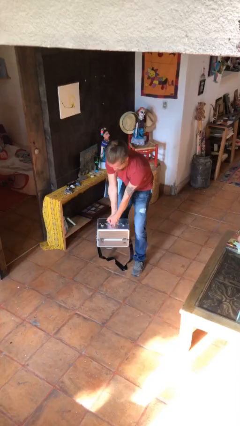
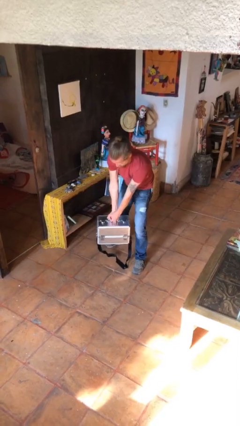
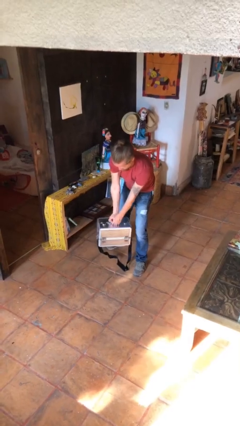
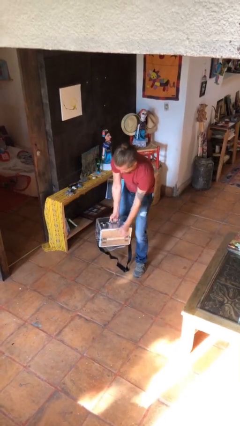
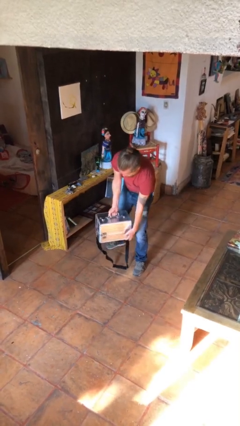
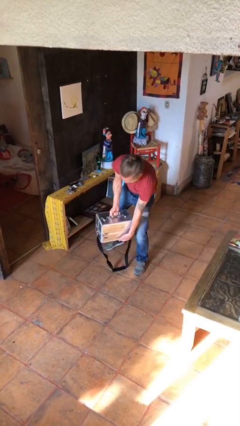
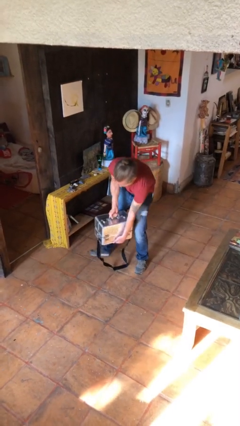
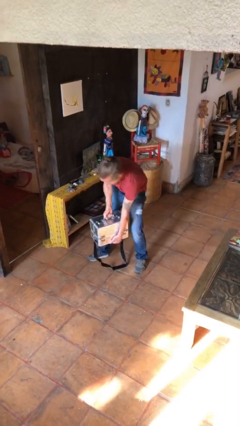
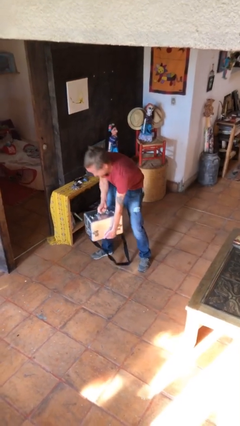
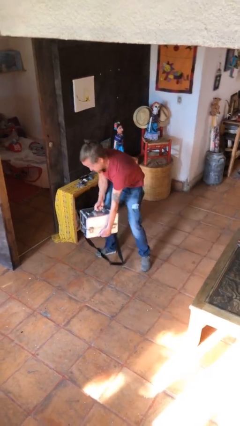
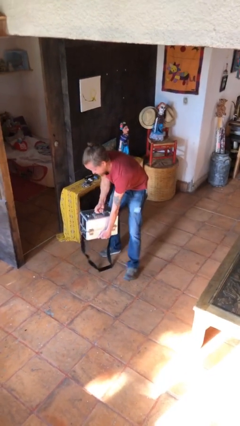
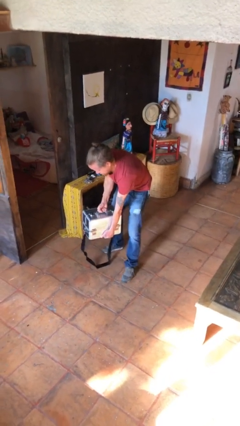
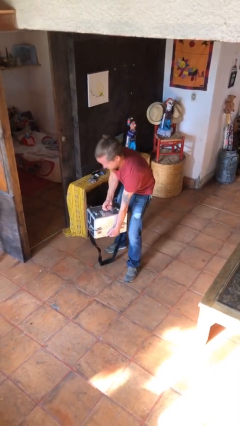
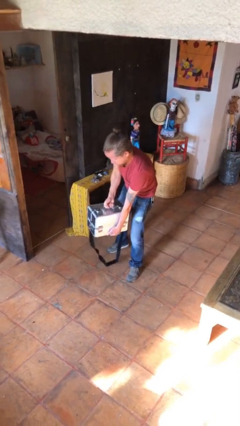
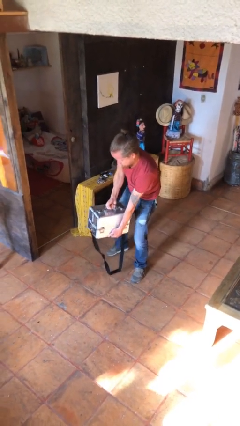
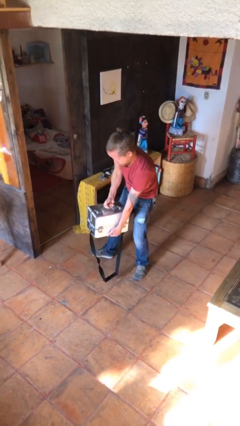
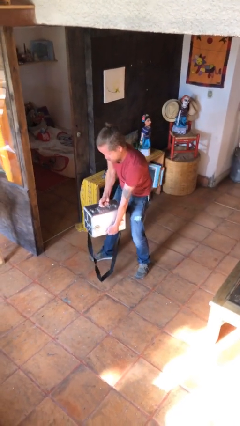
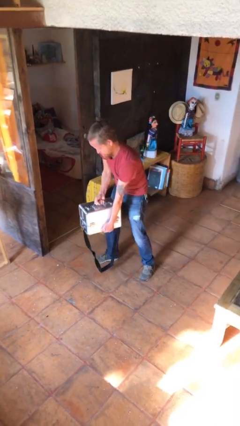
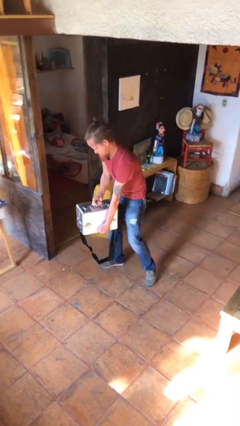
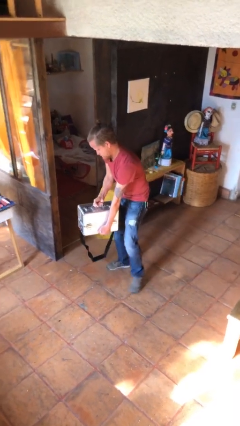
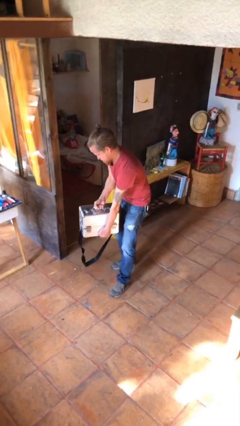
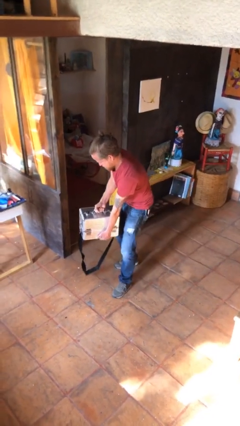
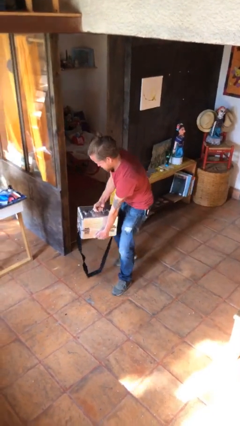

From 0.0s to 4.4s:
person carries heavy object
